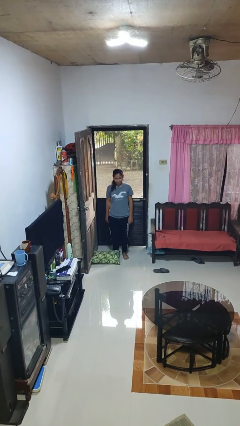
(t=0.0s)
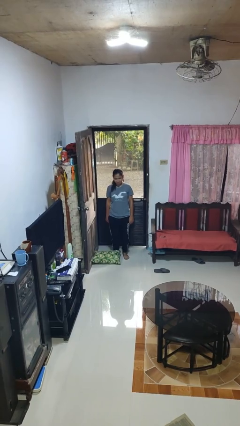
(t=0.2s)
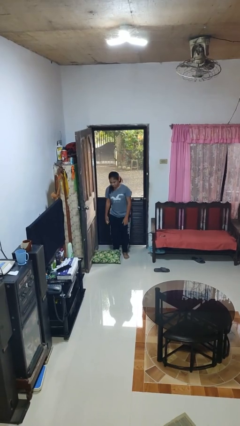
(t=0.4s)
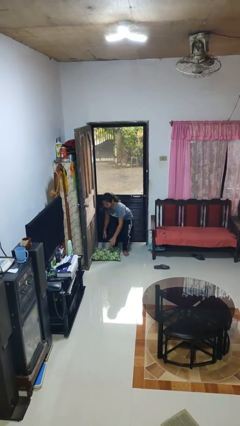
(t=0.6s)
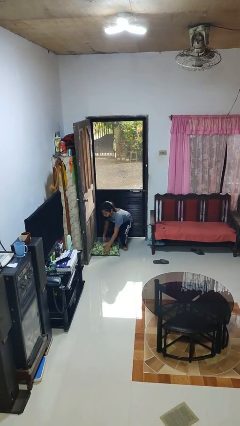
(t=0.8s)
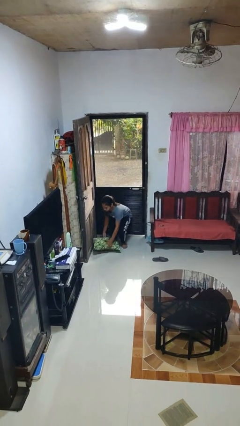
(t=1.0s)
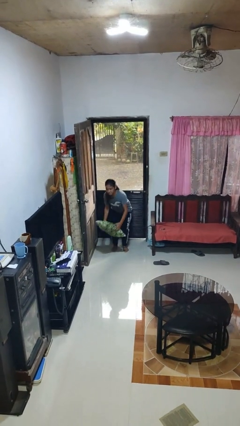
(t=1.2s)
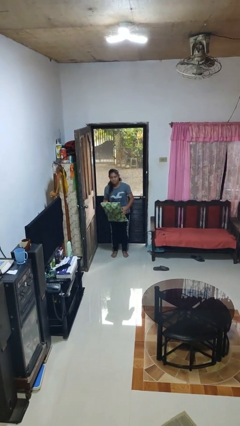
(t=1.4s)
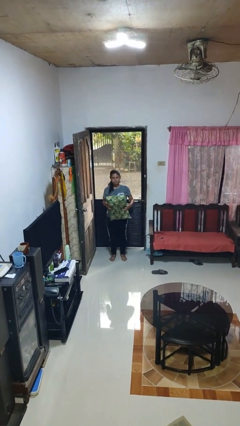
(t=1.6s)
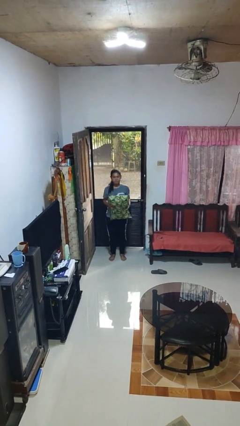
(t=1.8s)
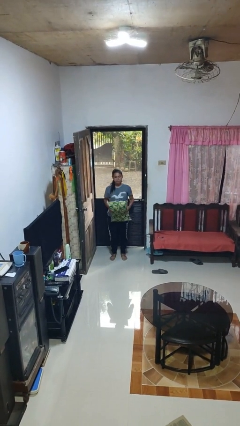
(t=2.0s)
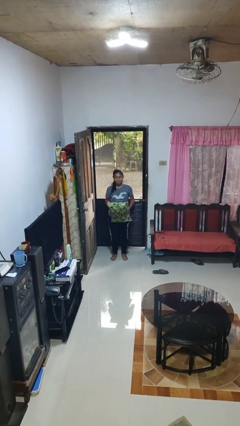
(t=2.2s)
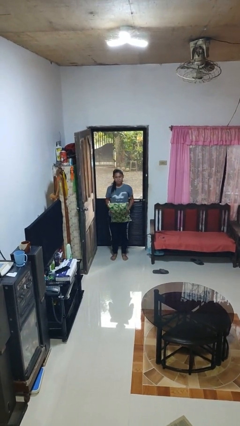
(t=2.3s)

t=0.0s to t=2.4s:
person picks up object from floor

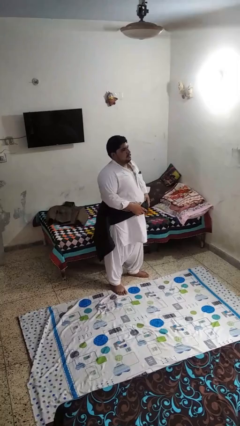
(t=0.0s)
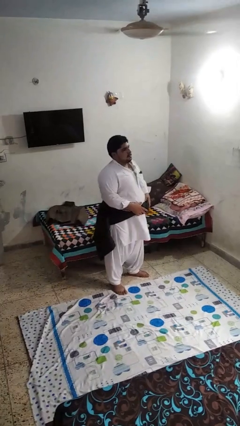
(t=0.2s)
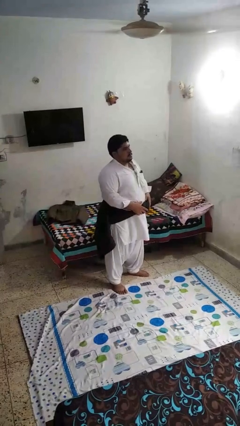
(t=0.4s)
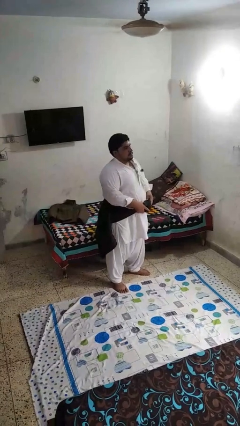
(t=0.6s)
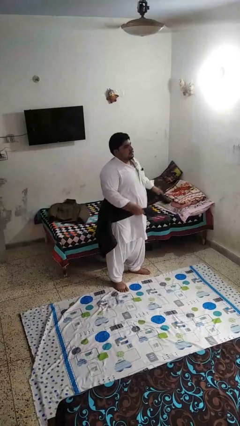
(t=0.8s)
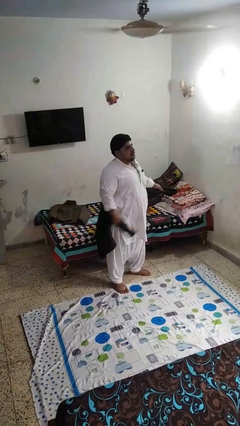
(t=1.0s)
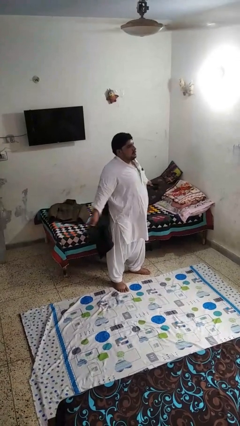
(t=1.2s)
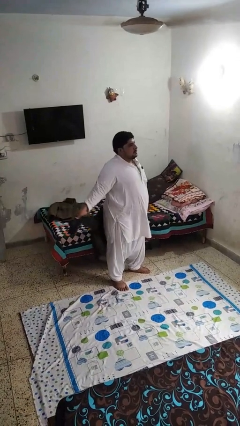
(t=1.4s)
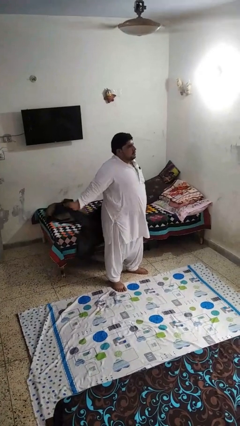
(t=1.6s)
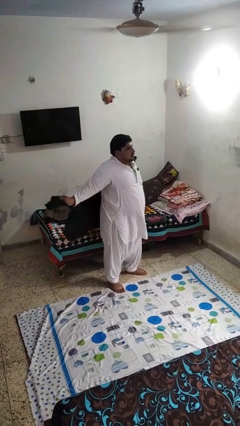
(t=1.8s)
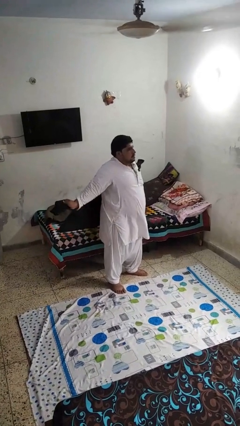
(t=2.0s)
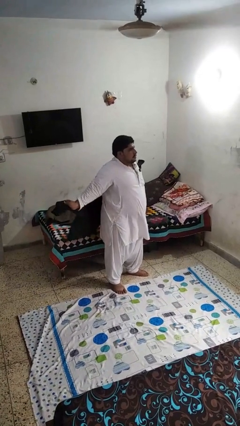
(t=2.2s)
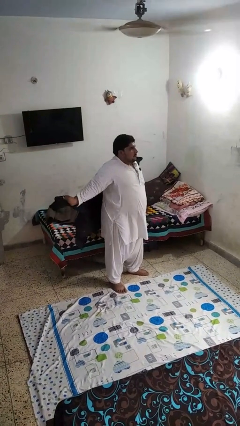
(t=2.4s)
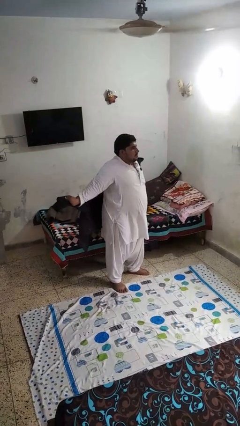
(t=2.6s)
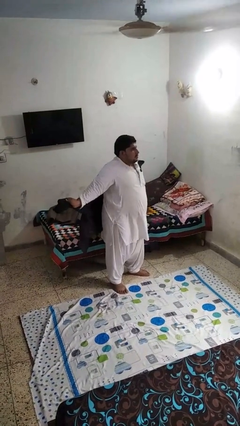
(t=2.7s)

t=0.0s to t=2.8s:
person unties jacket around waist

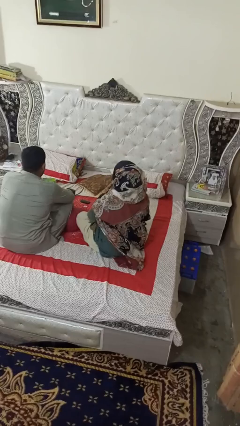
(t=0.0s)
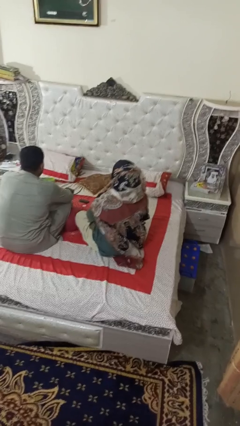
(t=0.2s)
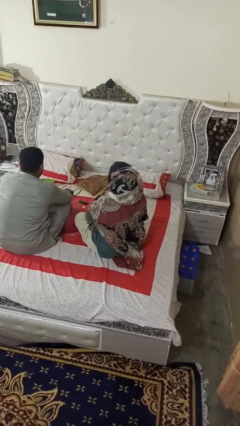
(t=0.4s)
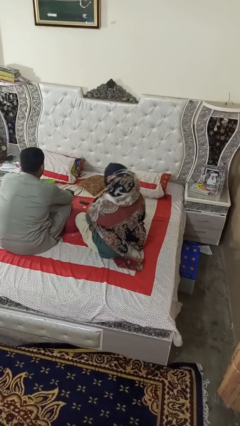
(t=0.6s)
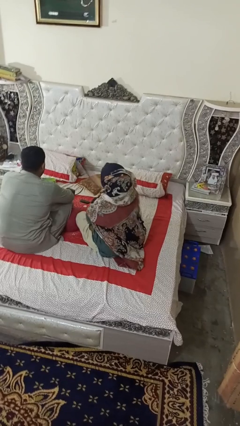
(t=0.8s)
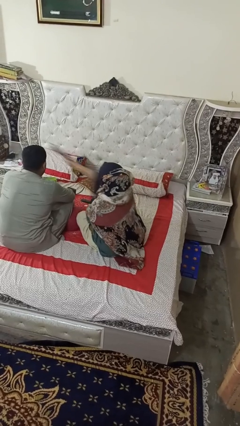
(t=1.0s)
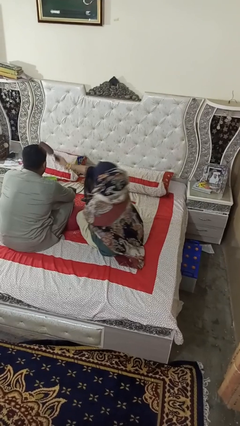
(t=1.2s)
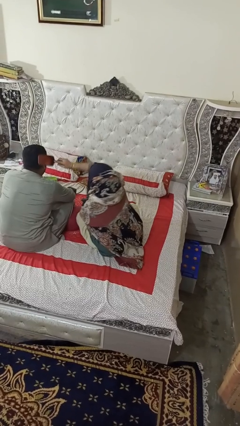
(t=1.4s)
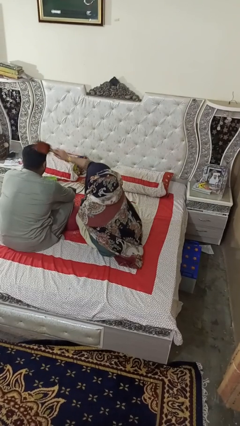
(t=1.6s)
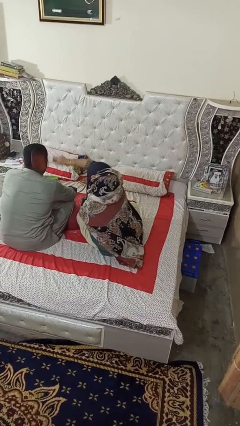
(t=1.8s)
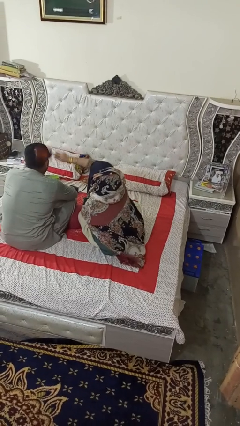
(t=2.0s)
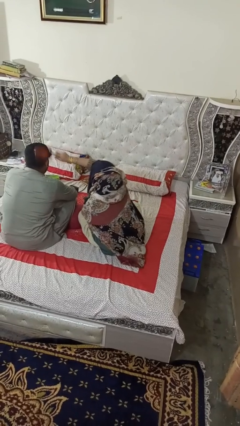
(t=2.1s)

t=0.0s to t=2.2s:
person brushes hair of person

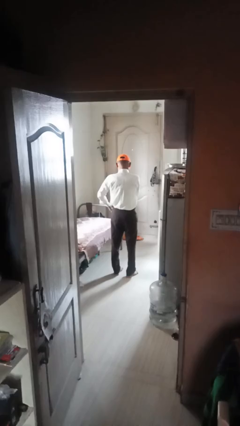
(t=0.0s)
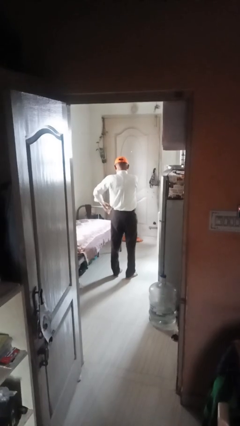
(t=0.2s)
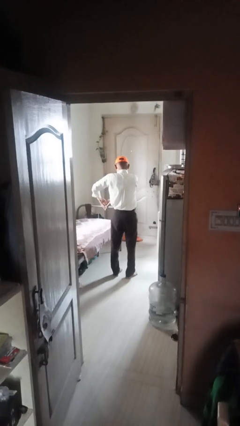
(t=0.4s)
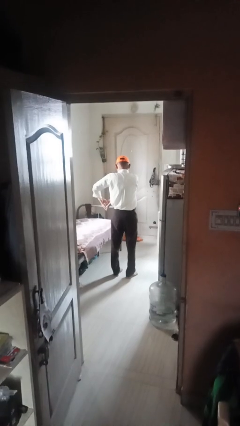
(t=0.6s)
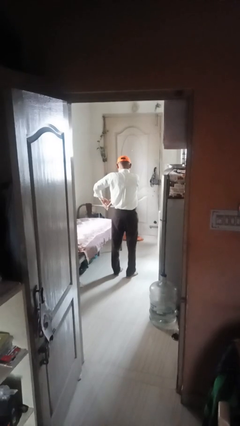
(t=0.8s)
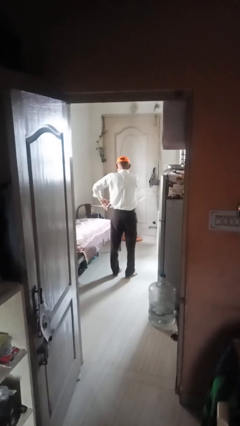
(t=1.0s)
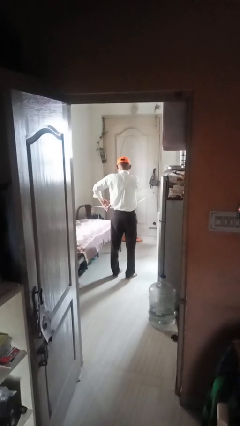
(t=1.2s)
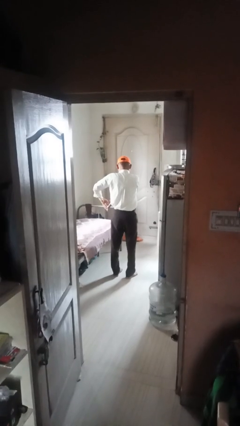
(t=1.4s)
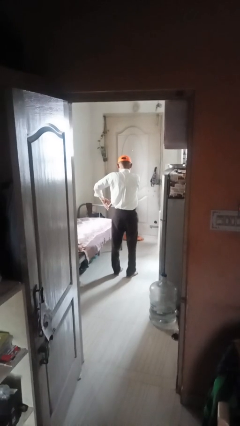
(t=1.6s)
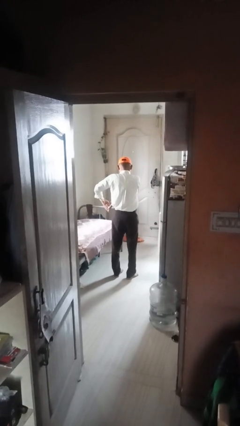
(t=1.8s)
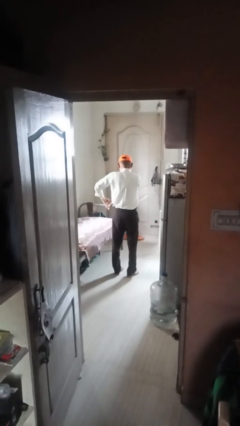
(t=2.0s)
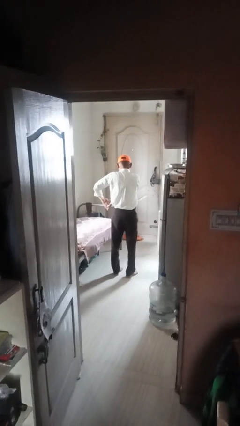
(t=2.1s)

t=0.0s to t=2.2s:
person gestures heart

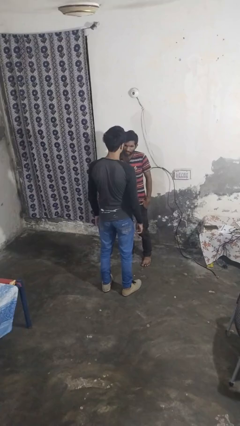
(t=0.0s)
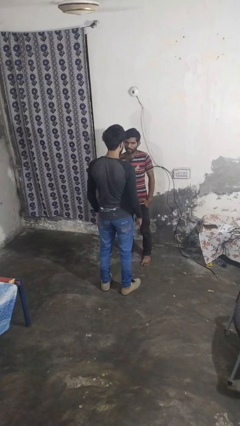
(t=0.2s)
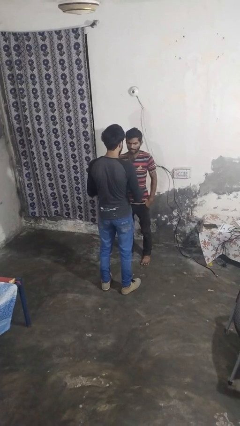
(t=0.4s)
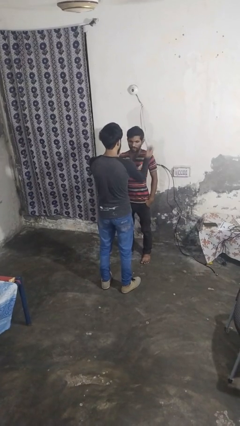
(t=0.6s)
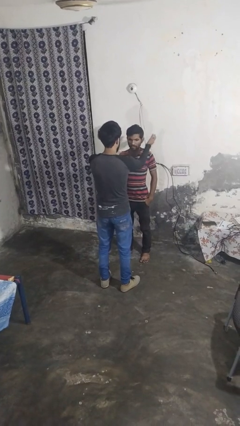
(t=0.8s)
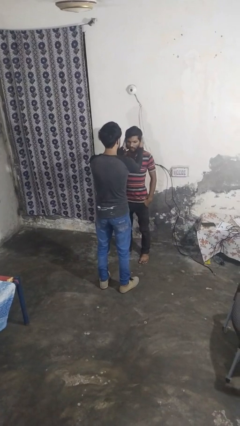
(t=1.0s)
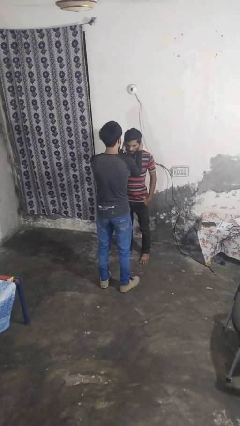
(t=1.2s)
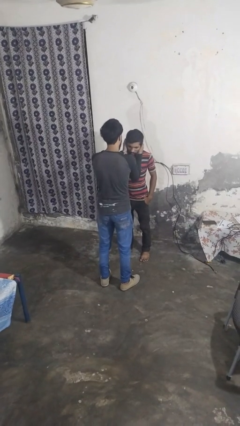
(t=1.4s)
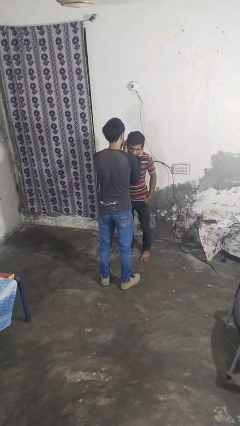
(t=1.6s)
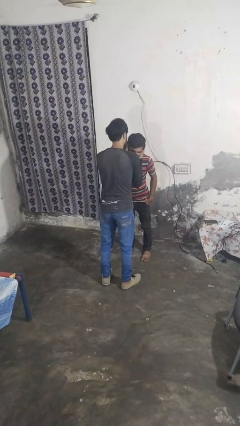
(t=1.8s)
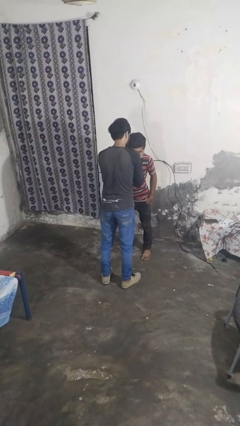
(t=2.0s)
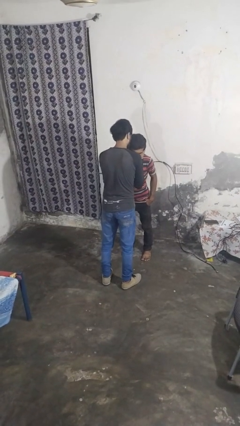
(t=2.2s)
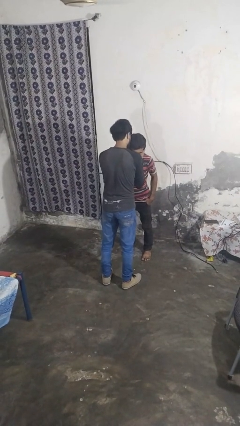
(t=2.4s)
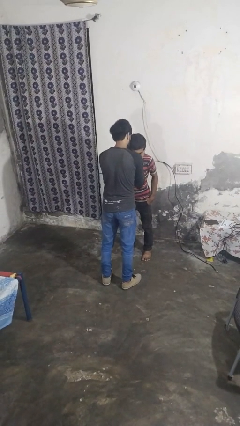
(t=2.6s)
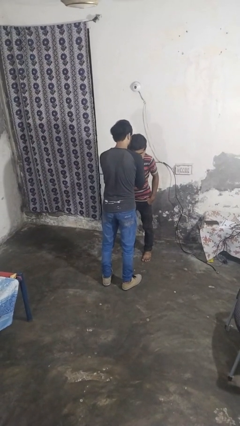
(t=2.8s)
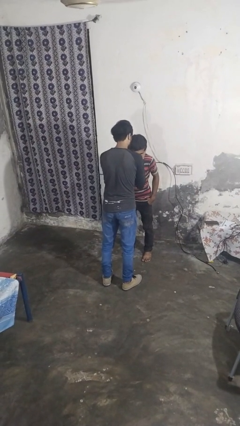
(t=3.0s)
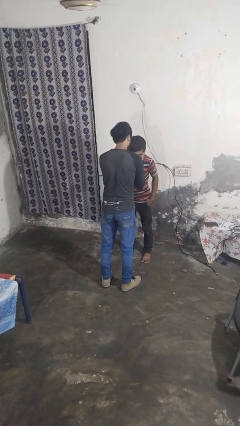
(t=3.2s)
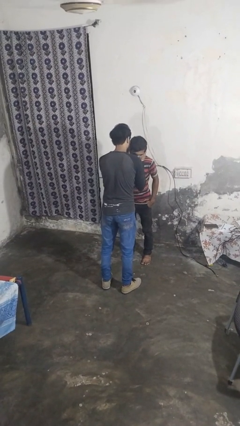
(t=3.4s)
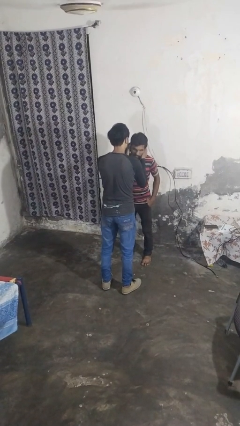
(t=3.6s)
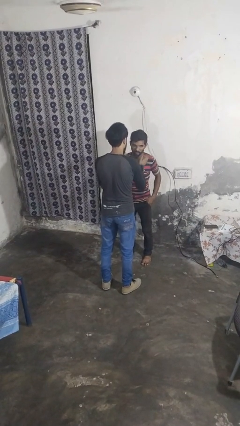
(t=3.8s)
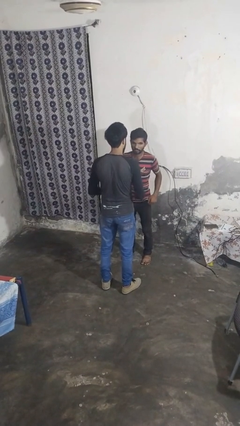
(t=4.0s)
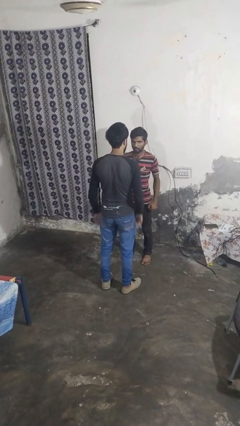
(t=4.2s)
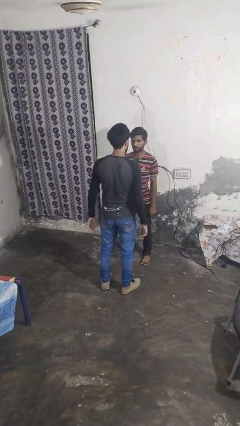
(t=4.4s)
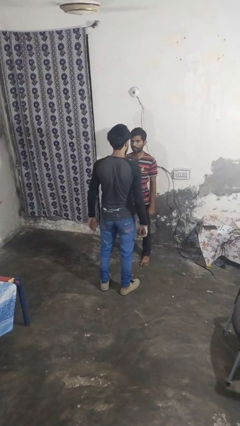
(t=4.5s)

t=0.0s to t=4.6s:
person kisses cheek of person

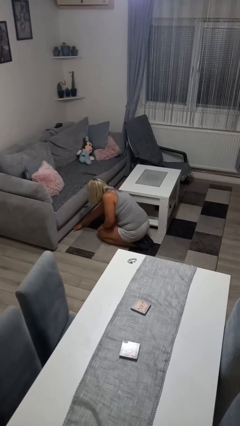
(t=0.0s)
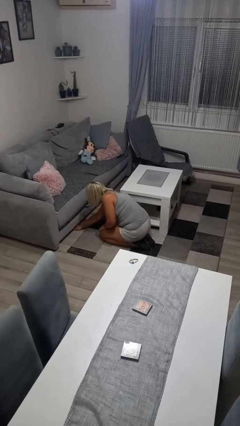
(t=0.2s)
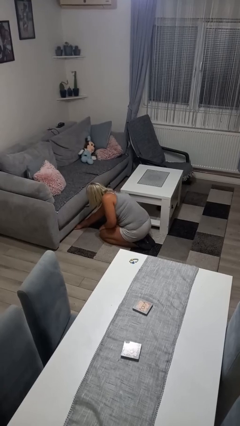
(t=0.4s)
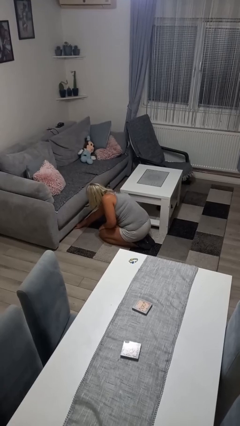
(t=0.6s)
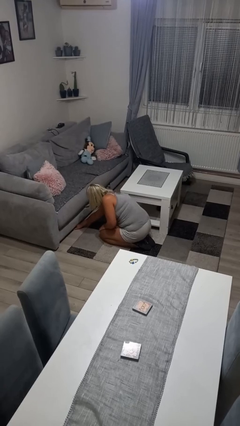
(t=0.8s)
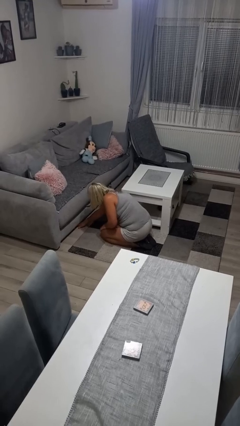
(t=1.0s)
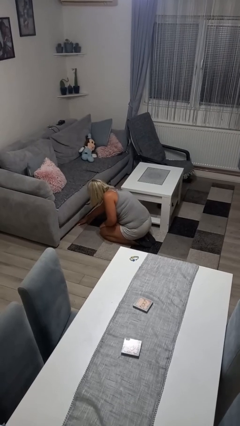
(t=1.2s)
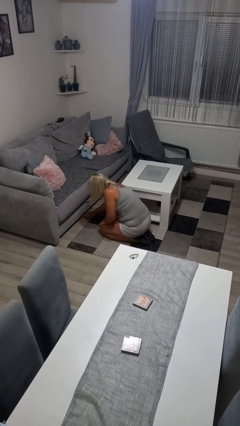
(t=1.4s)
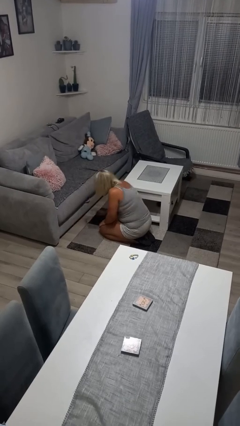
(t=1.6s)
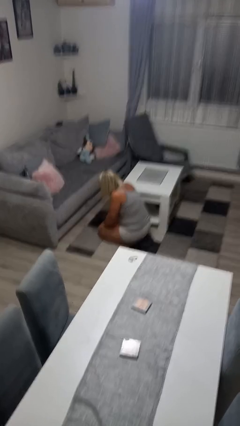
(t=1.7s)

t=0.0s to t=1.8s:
person searches under couch

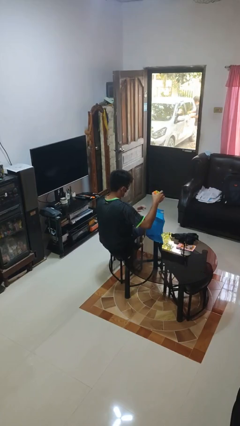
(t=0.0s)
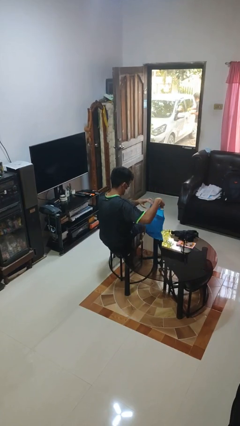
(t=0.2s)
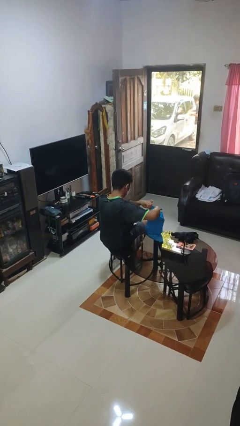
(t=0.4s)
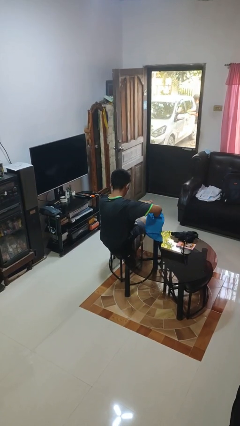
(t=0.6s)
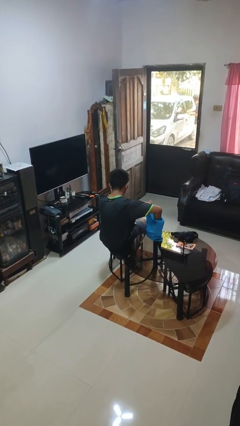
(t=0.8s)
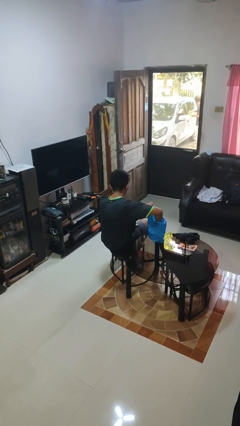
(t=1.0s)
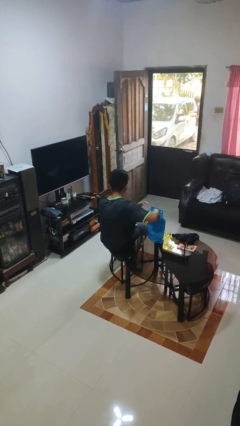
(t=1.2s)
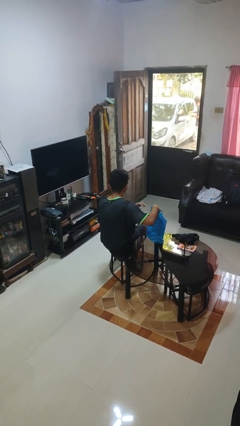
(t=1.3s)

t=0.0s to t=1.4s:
person puts object into bag
